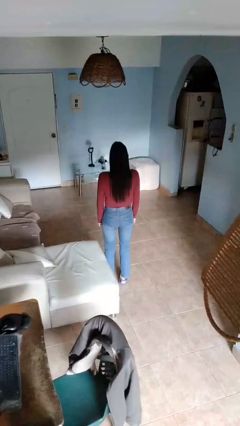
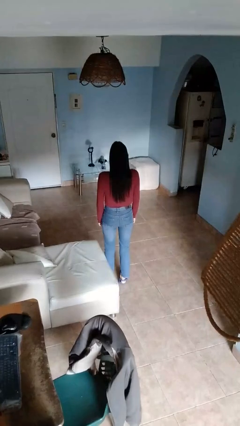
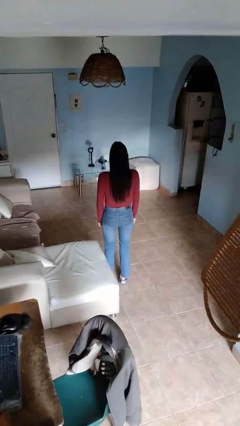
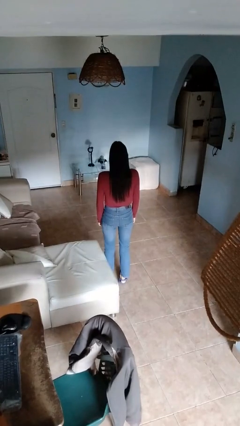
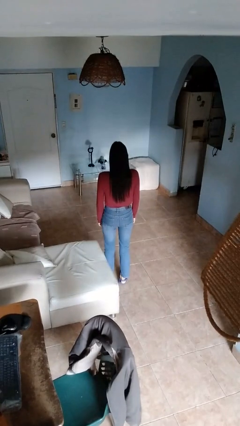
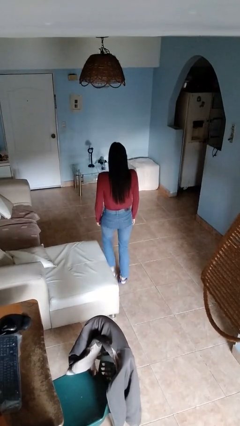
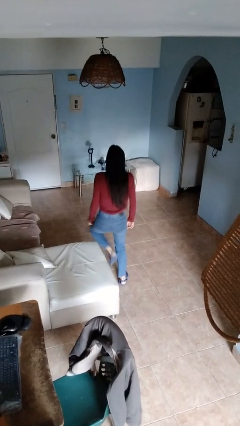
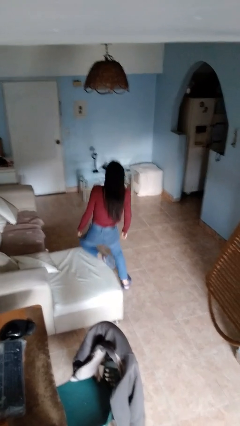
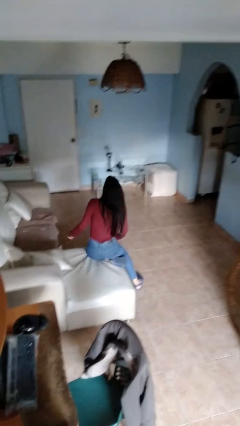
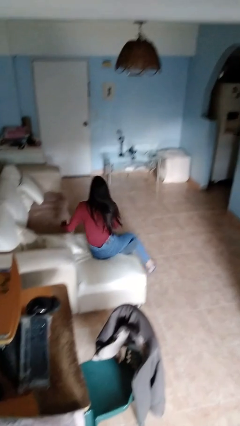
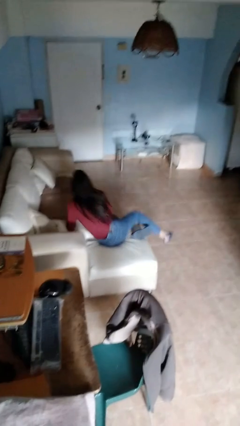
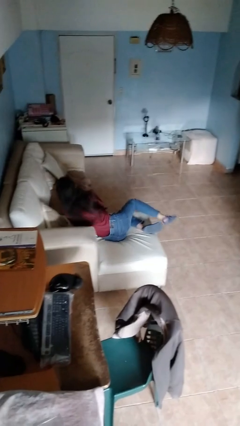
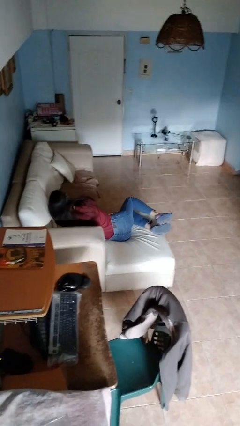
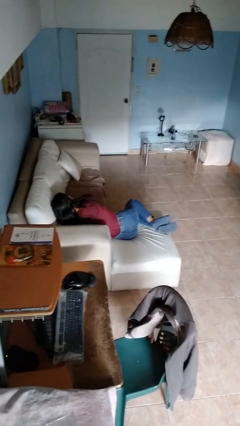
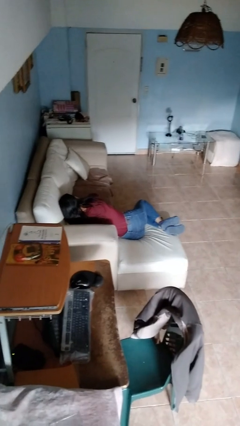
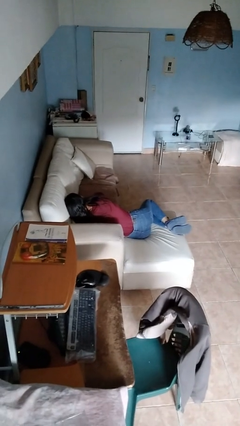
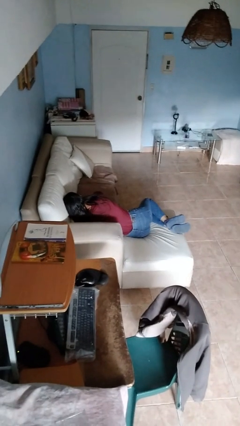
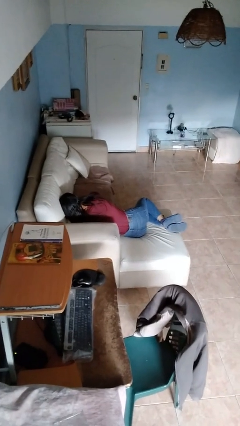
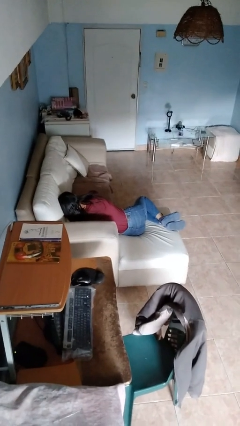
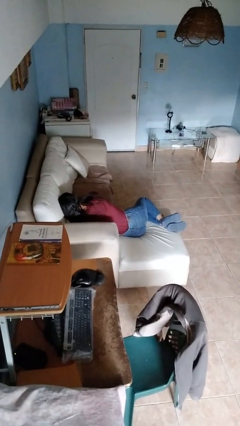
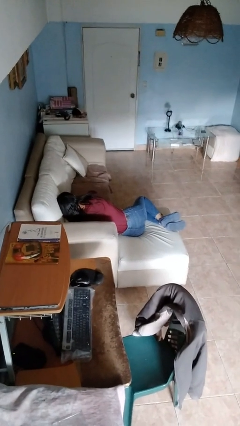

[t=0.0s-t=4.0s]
person lies down on couch

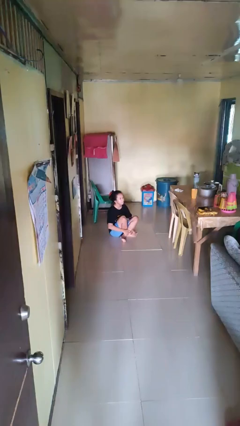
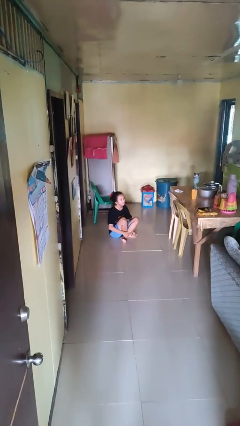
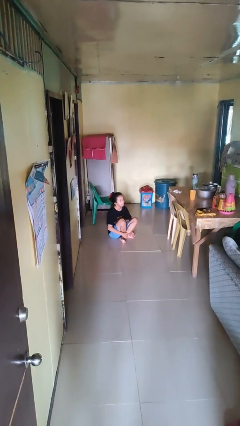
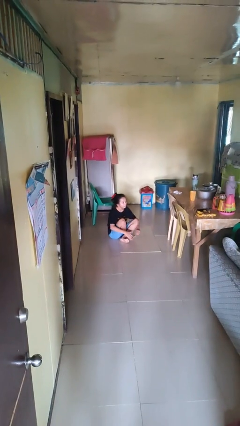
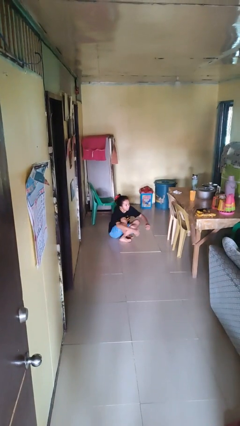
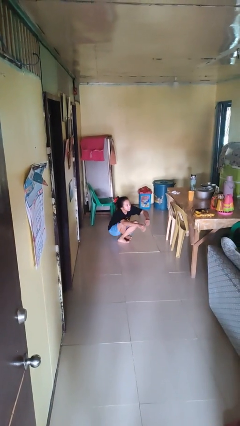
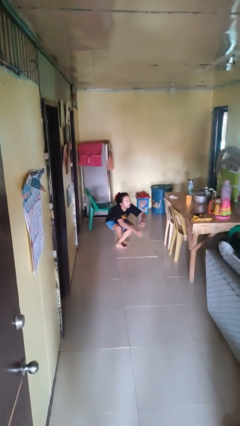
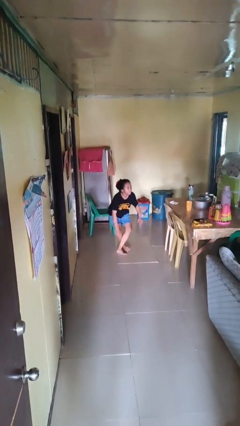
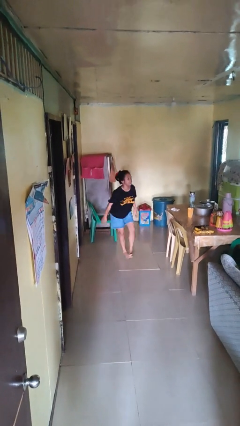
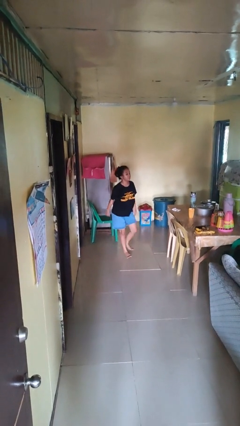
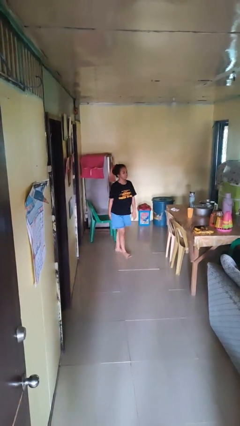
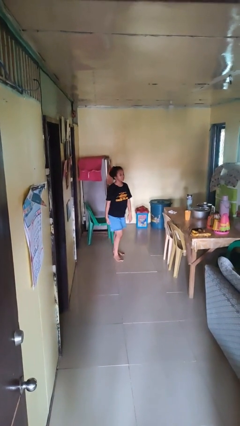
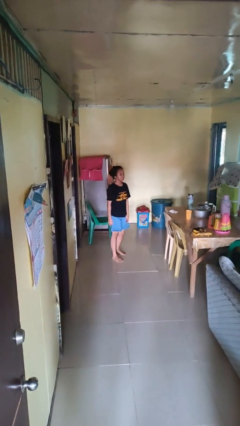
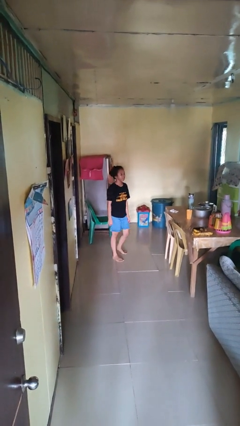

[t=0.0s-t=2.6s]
person stands up from floor

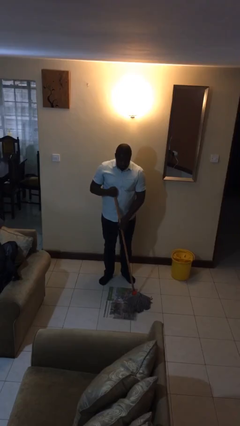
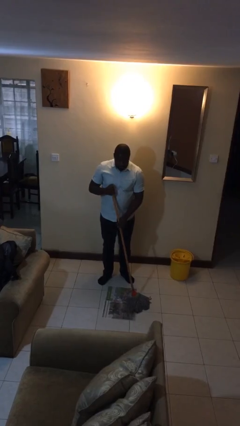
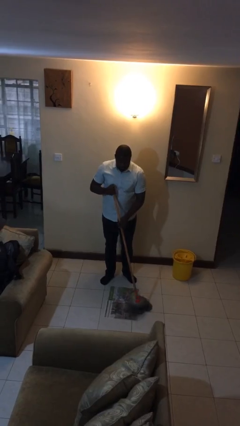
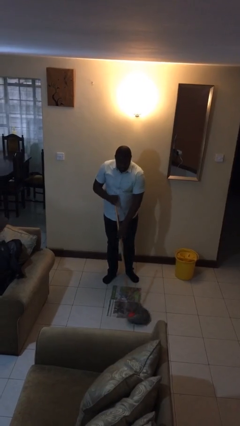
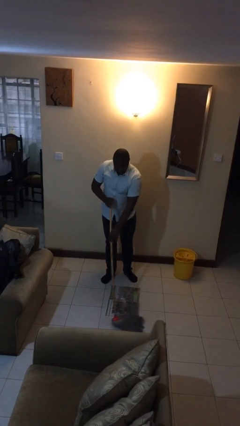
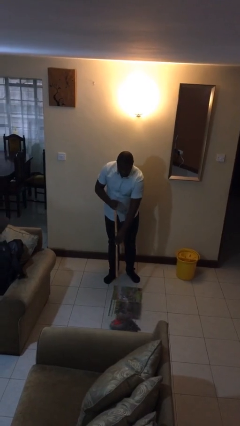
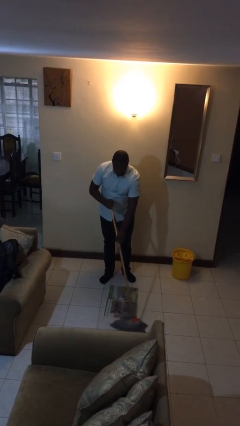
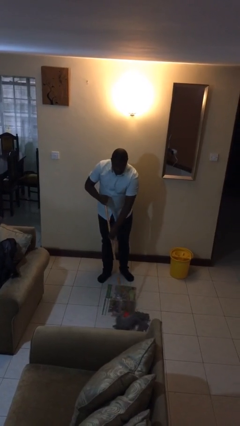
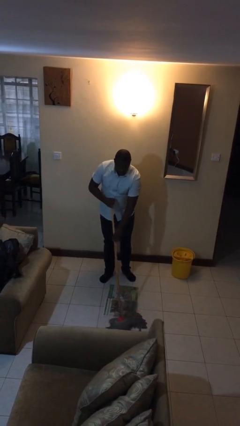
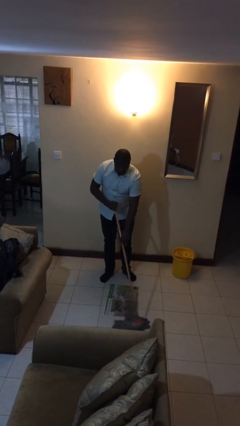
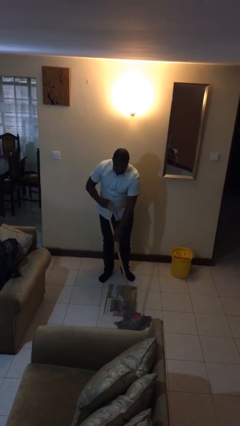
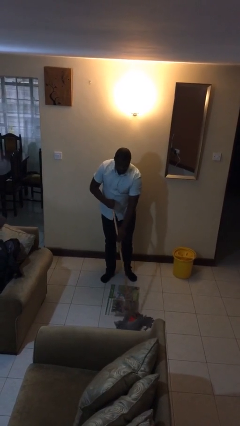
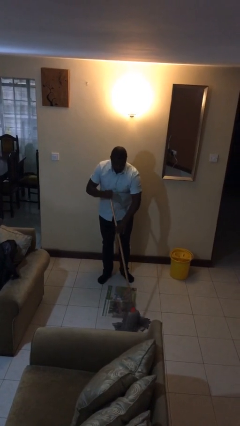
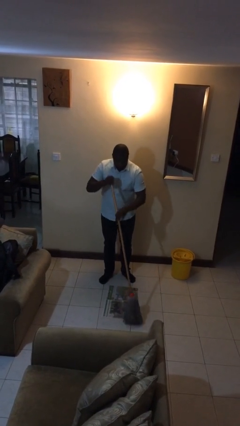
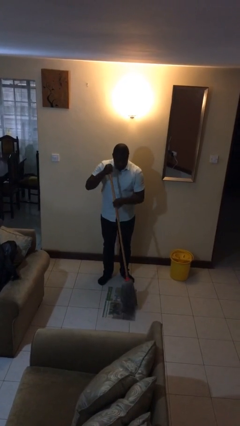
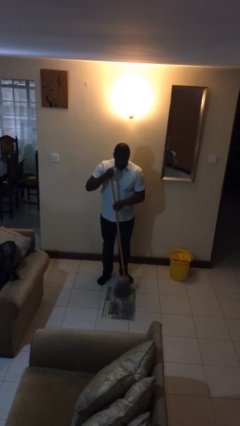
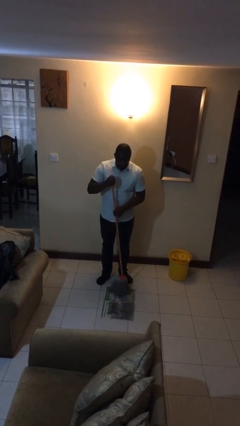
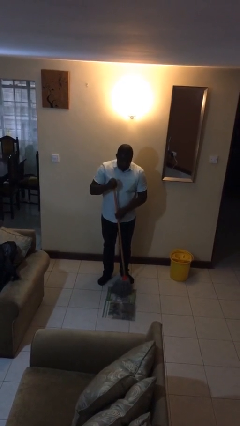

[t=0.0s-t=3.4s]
person mops

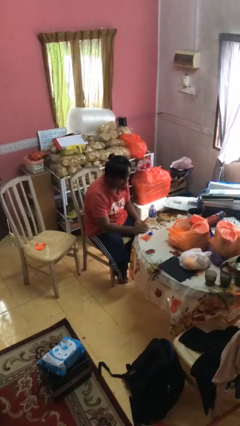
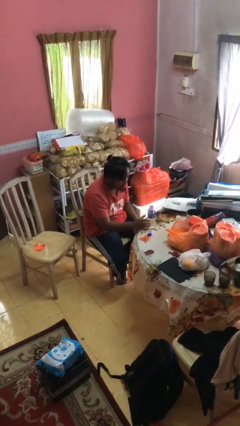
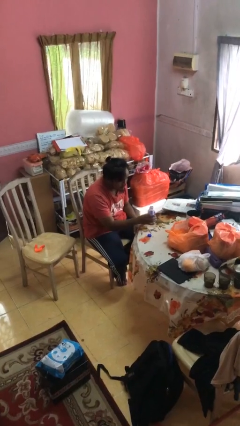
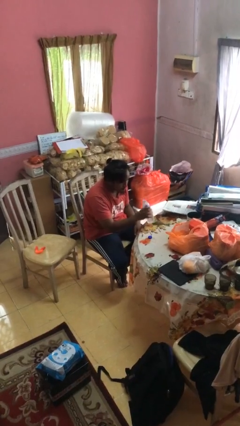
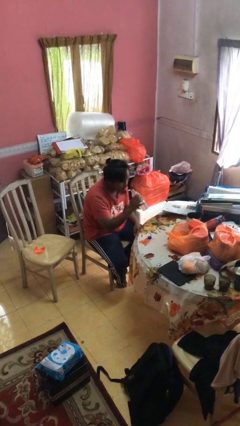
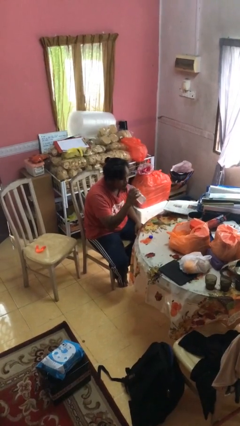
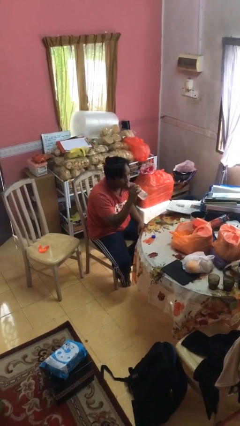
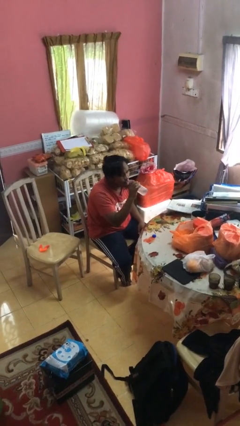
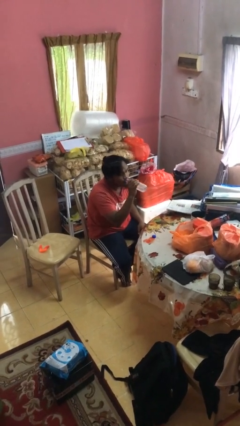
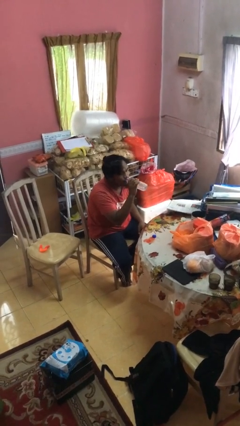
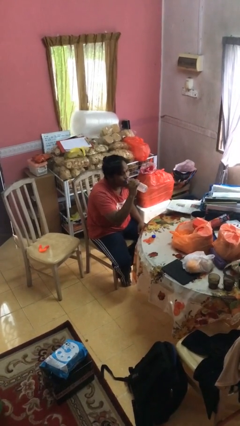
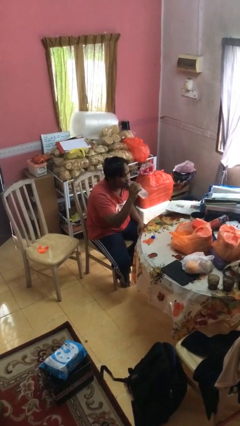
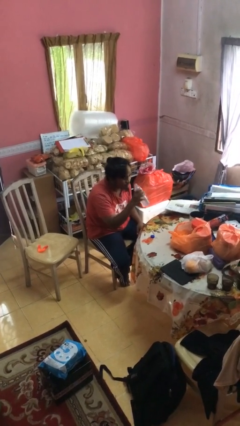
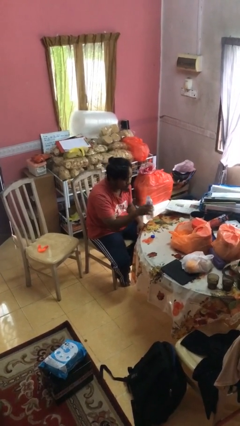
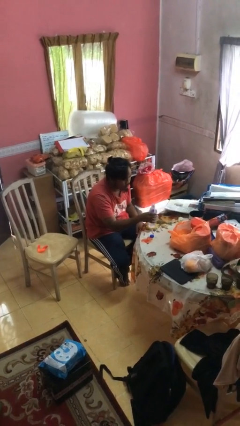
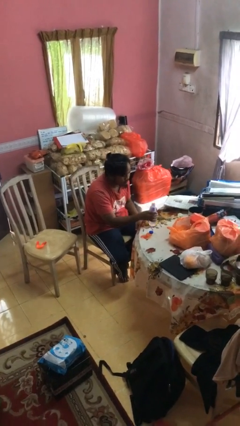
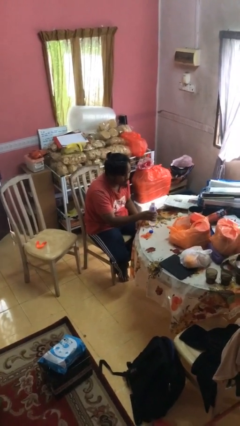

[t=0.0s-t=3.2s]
person drinks from bottle

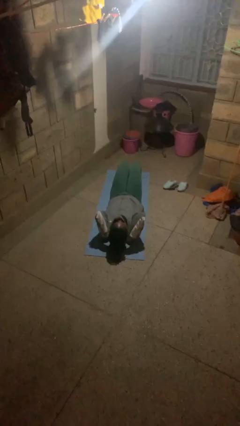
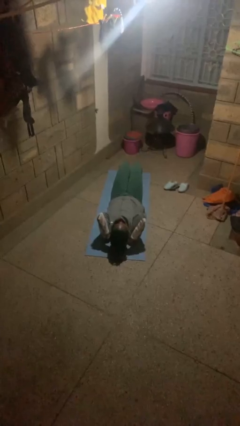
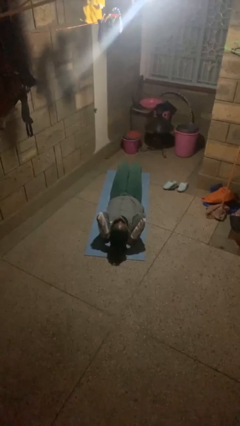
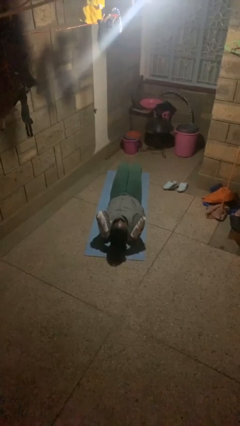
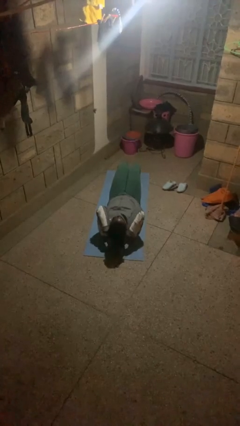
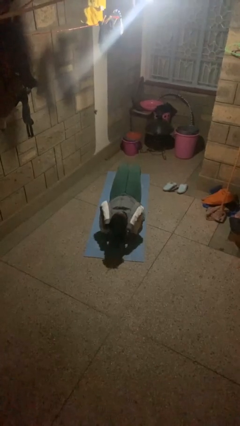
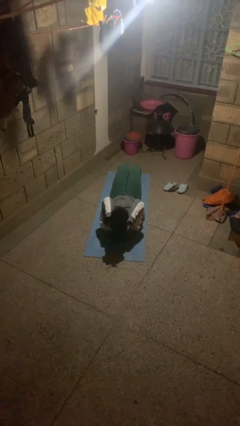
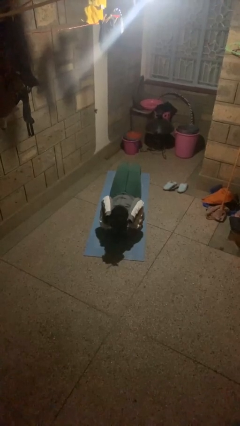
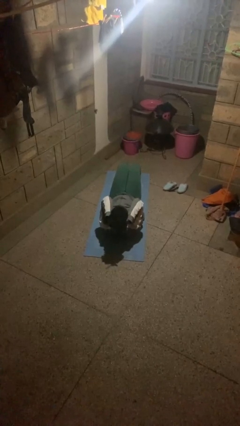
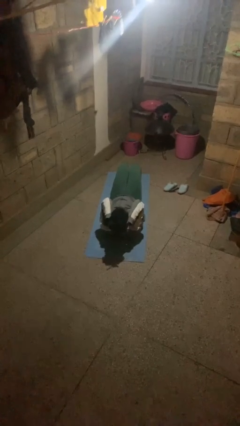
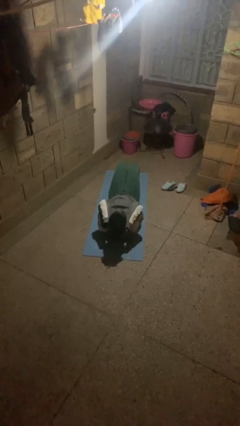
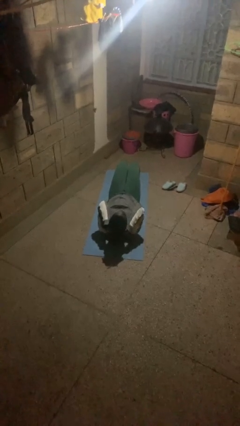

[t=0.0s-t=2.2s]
person exercises with situp

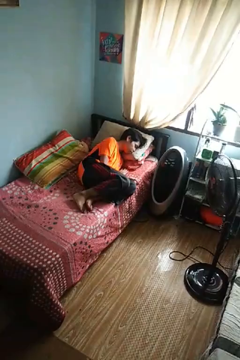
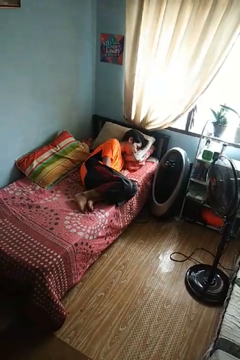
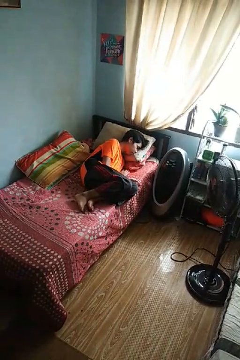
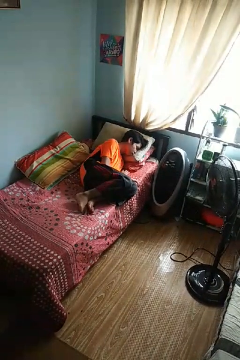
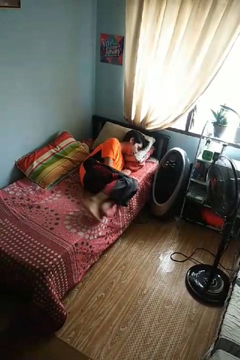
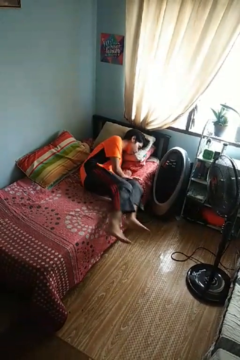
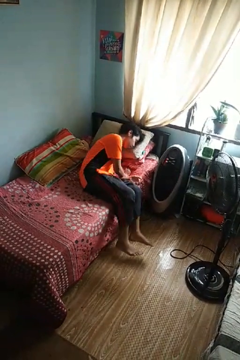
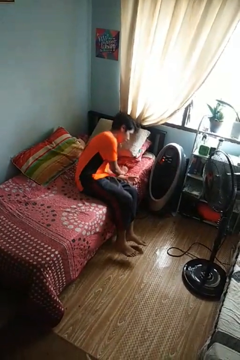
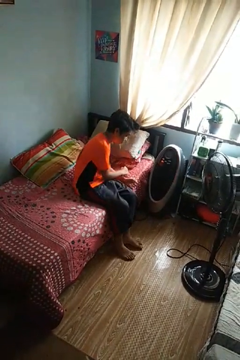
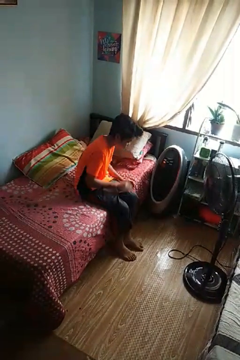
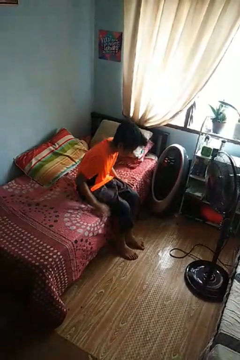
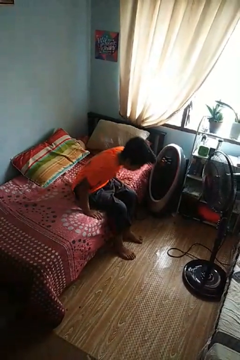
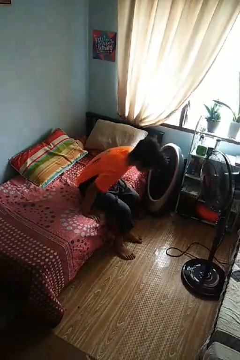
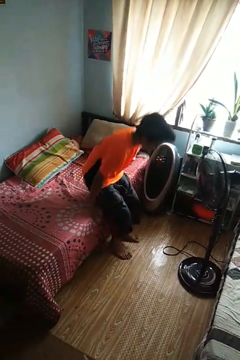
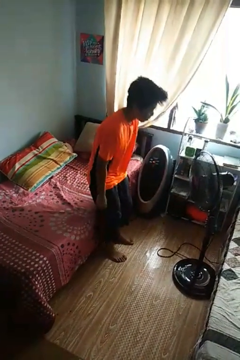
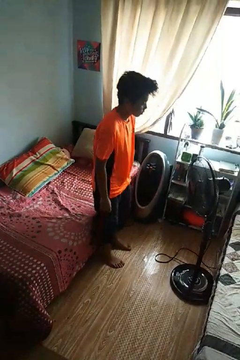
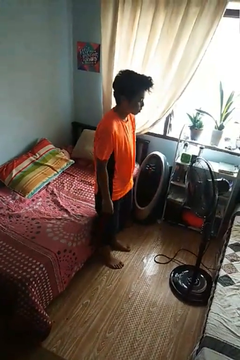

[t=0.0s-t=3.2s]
person stands up
